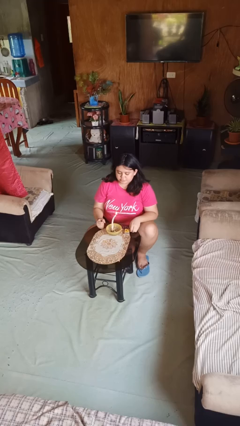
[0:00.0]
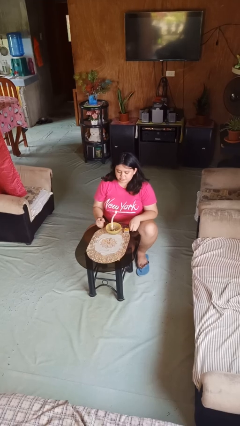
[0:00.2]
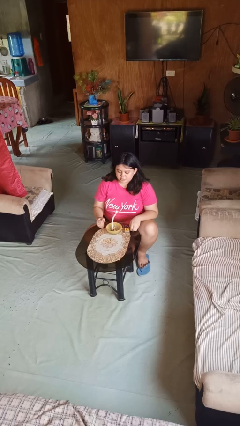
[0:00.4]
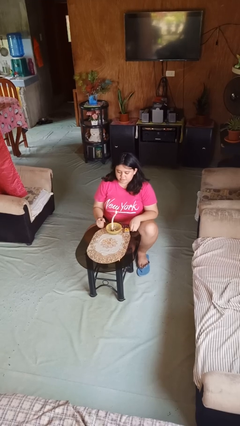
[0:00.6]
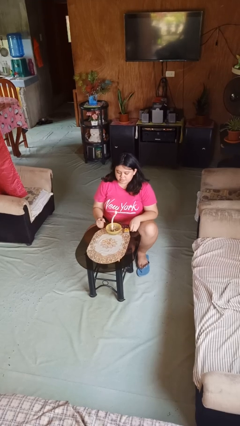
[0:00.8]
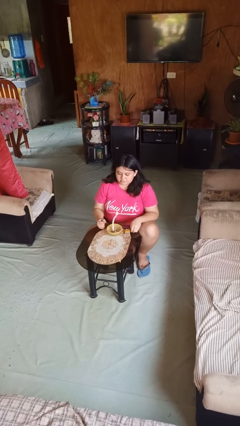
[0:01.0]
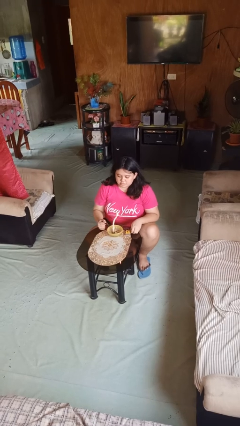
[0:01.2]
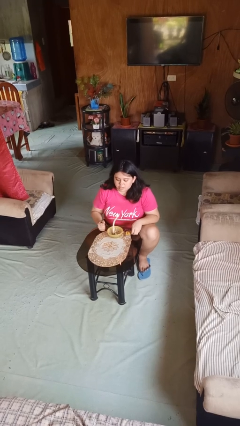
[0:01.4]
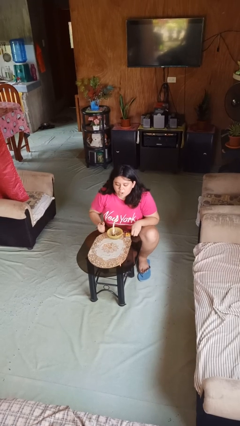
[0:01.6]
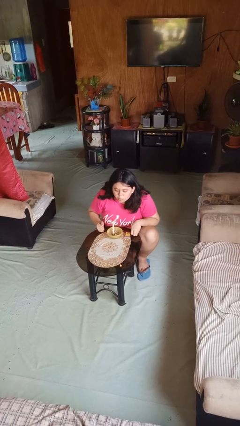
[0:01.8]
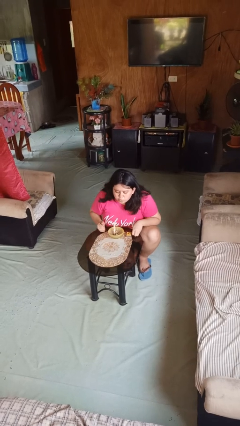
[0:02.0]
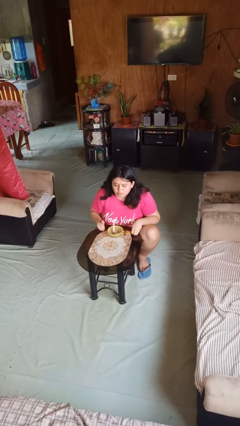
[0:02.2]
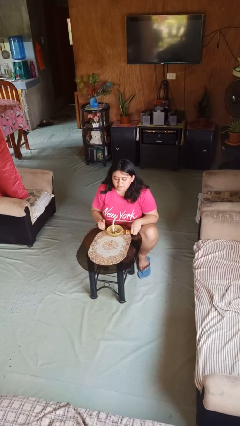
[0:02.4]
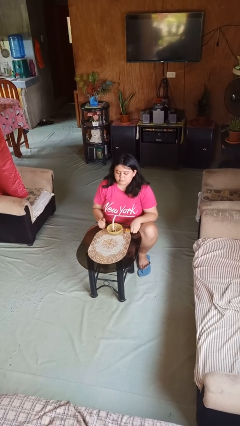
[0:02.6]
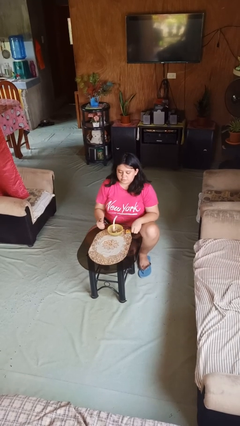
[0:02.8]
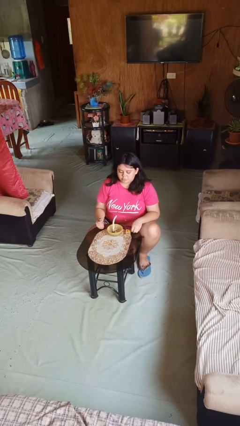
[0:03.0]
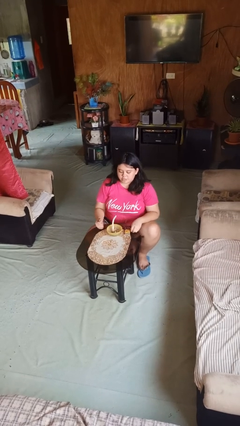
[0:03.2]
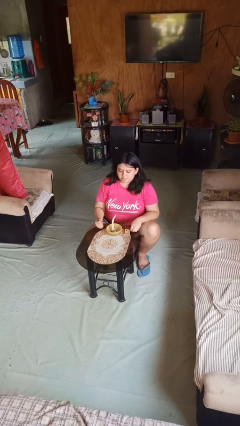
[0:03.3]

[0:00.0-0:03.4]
person extinguishes candle

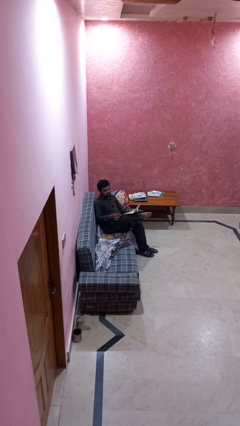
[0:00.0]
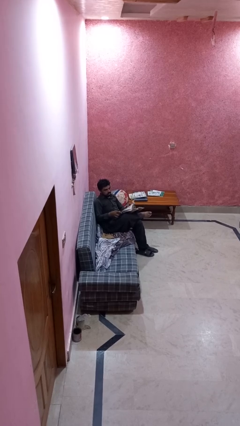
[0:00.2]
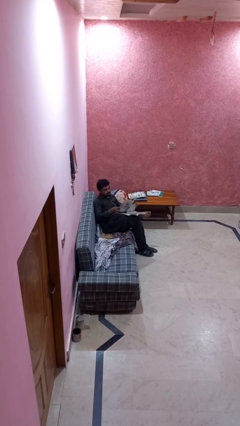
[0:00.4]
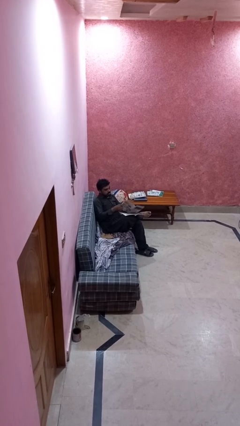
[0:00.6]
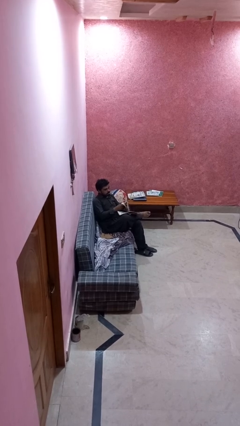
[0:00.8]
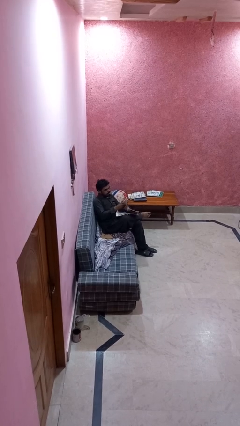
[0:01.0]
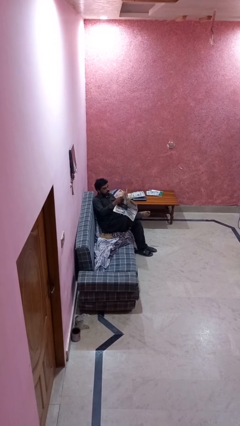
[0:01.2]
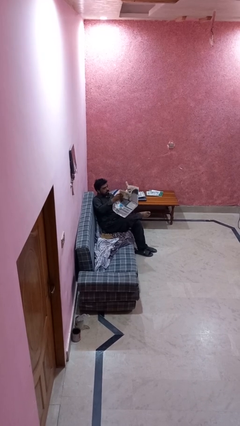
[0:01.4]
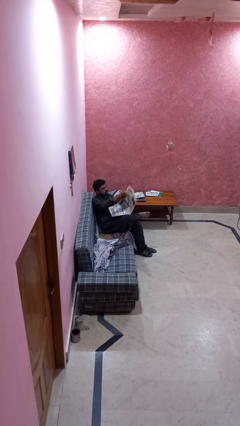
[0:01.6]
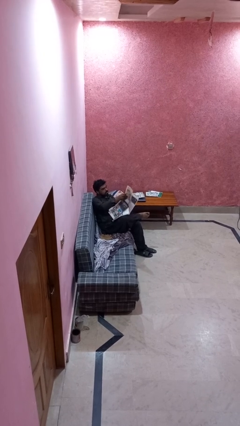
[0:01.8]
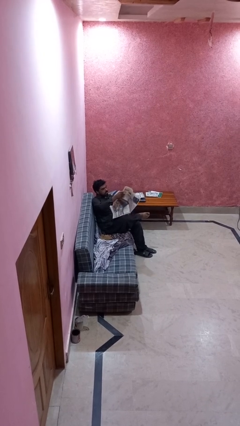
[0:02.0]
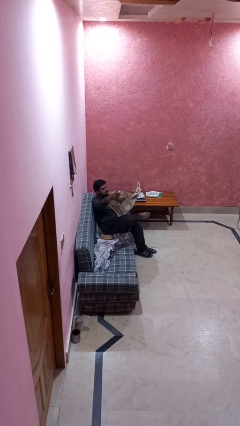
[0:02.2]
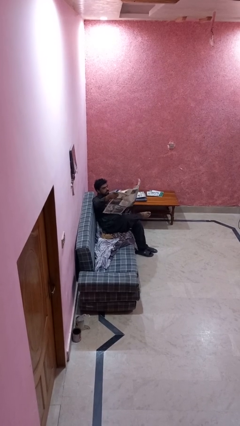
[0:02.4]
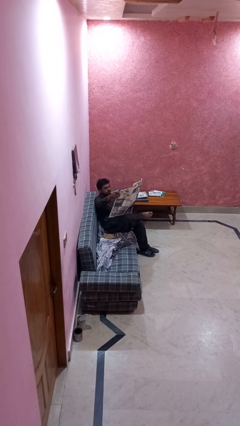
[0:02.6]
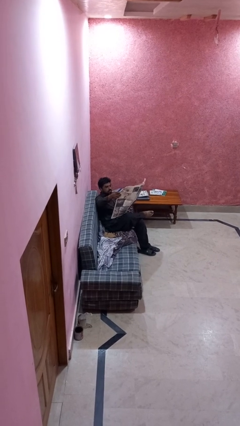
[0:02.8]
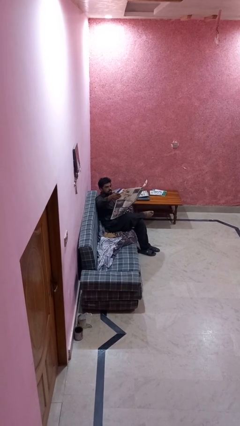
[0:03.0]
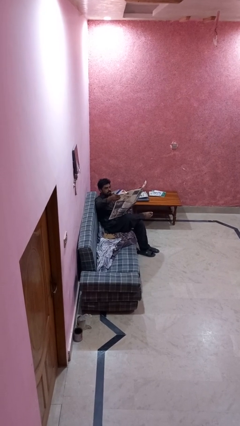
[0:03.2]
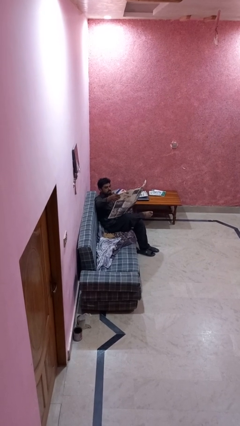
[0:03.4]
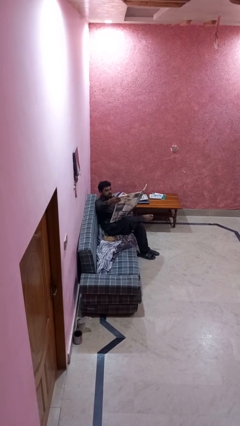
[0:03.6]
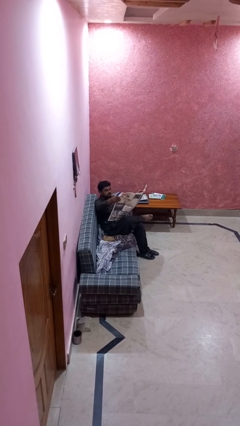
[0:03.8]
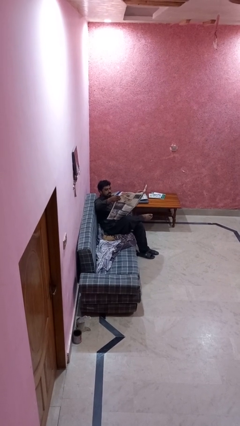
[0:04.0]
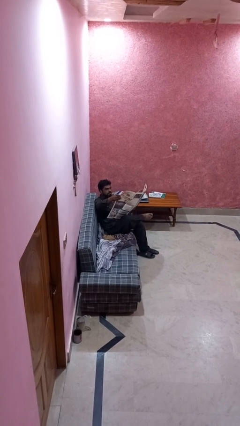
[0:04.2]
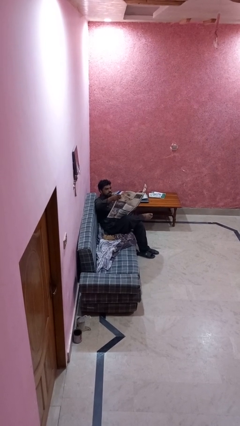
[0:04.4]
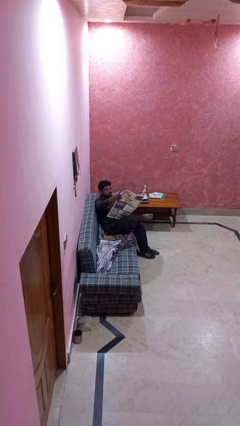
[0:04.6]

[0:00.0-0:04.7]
person reads newspaper

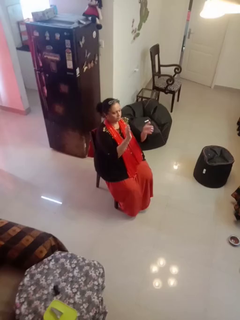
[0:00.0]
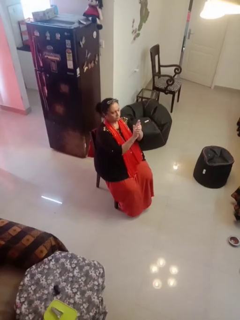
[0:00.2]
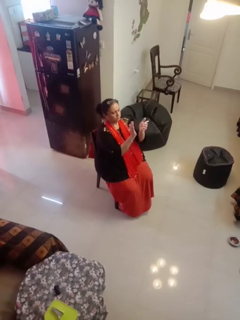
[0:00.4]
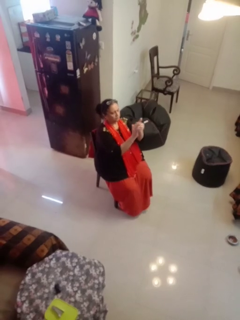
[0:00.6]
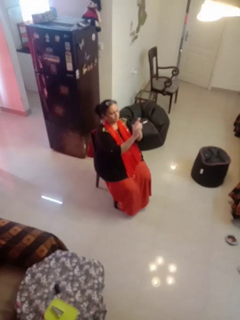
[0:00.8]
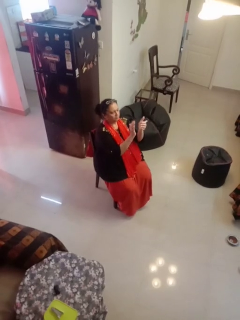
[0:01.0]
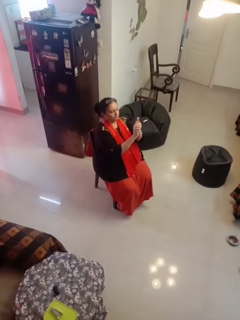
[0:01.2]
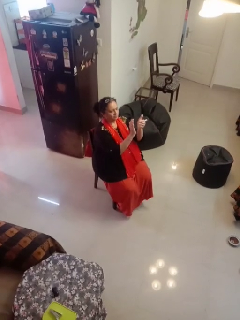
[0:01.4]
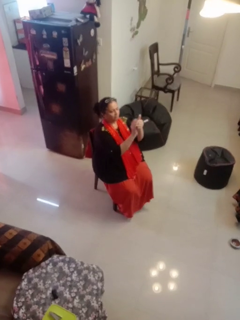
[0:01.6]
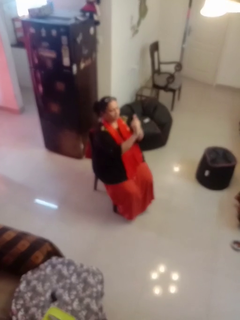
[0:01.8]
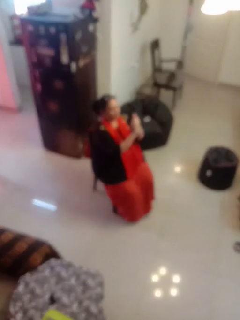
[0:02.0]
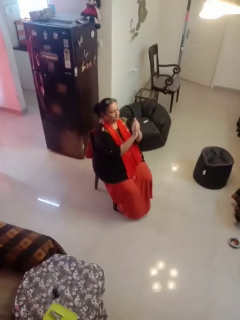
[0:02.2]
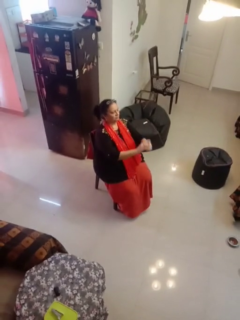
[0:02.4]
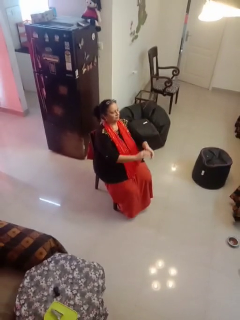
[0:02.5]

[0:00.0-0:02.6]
person claps hands

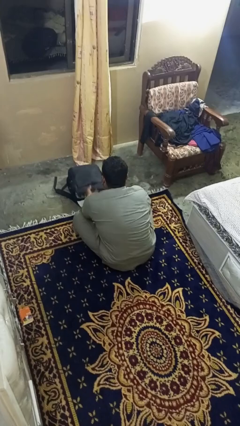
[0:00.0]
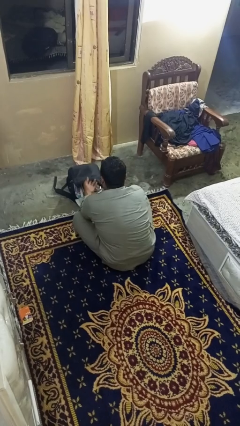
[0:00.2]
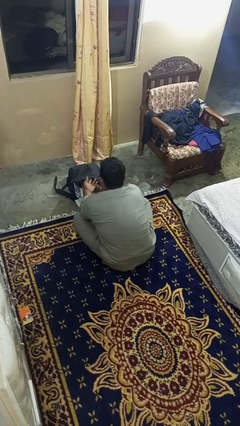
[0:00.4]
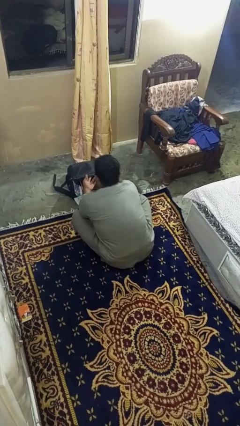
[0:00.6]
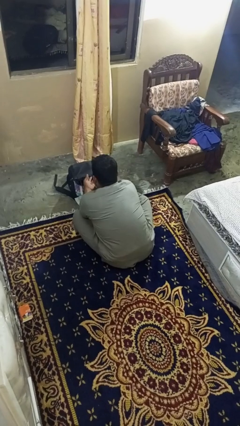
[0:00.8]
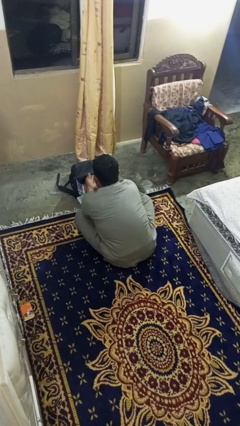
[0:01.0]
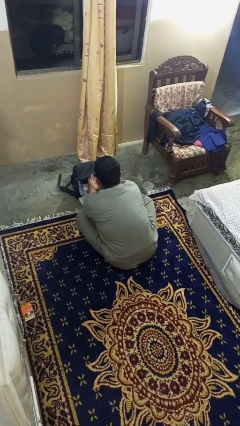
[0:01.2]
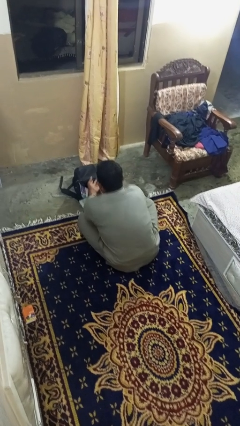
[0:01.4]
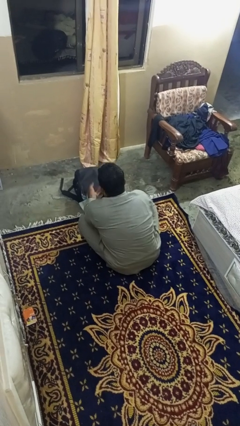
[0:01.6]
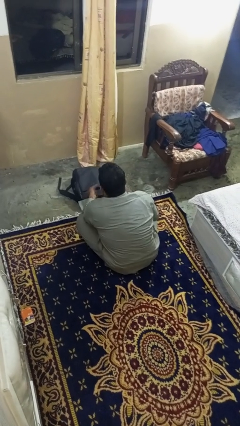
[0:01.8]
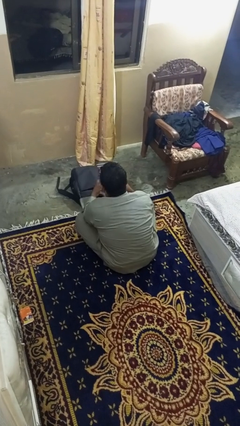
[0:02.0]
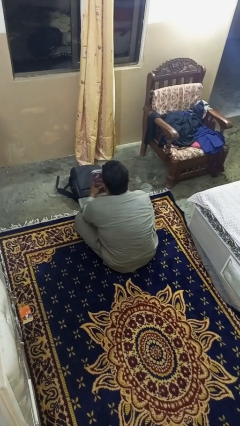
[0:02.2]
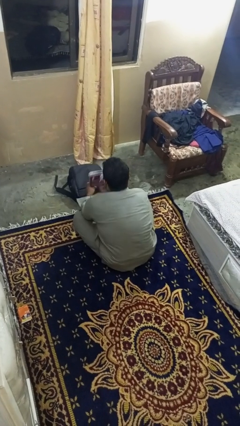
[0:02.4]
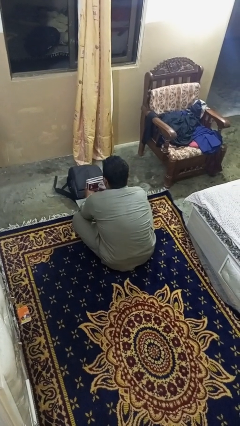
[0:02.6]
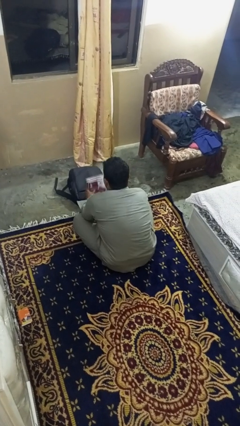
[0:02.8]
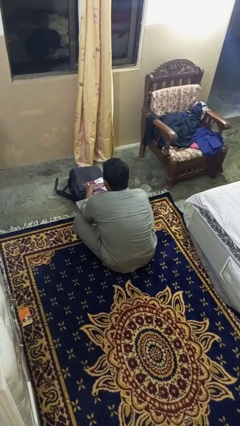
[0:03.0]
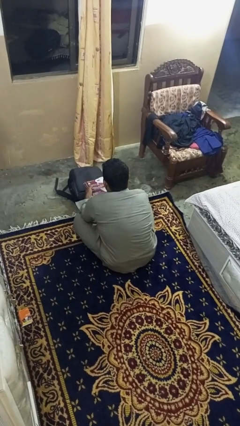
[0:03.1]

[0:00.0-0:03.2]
person takes object from bag

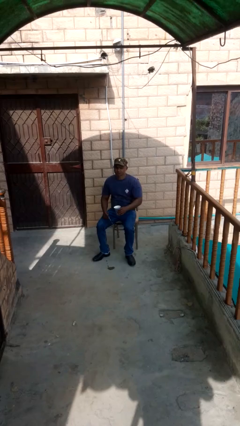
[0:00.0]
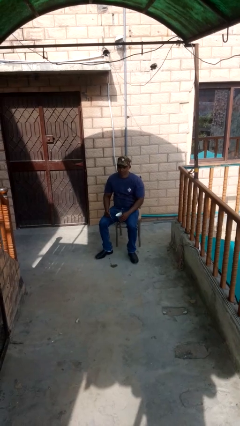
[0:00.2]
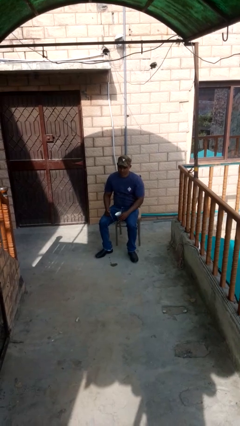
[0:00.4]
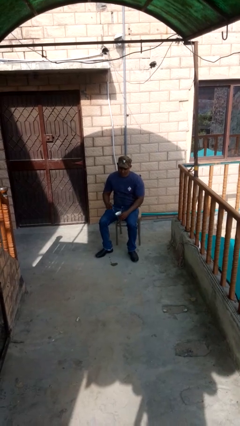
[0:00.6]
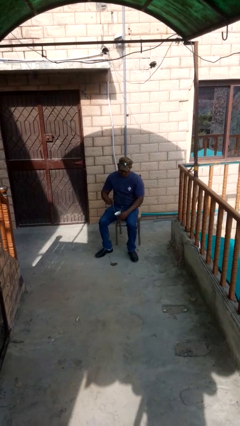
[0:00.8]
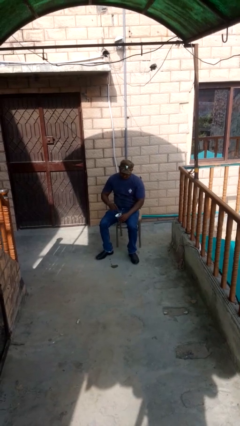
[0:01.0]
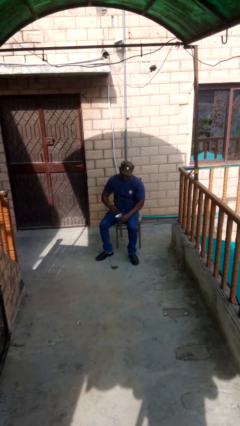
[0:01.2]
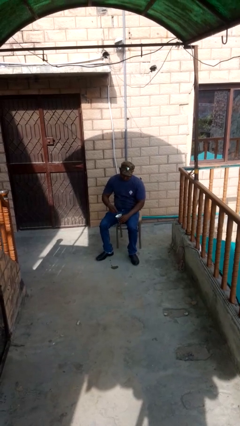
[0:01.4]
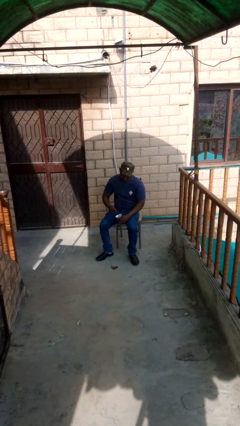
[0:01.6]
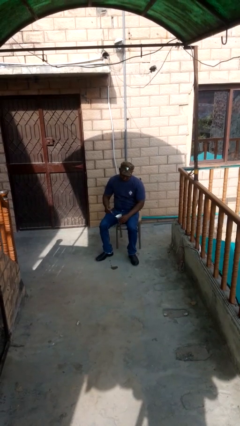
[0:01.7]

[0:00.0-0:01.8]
person stirs mug

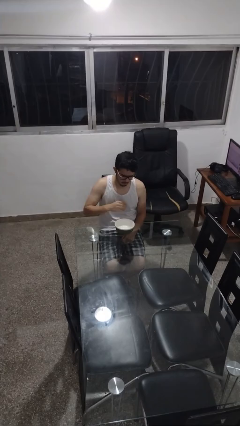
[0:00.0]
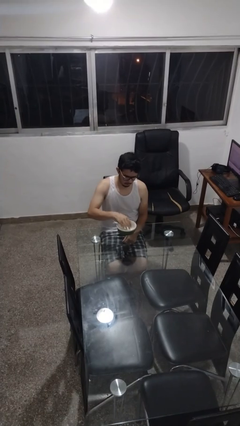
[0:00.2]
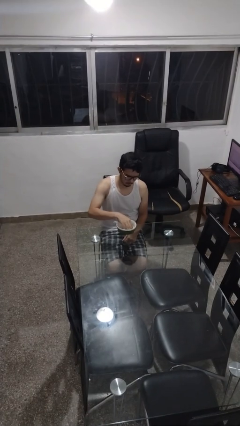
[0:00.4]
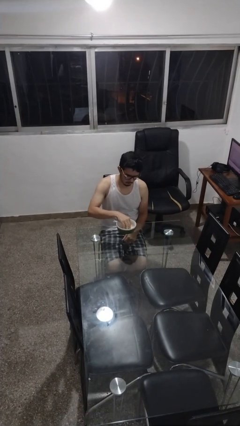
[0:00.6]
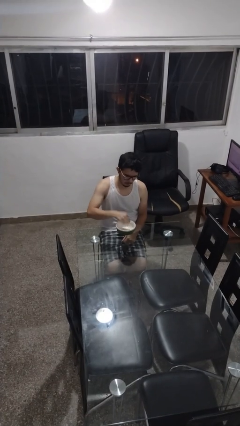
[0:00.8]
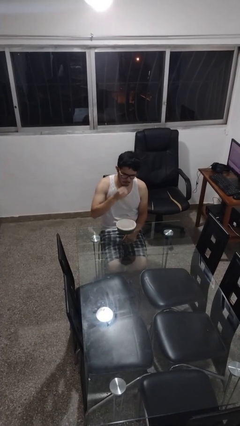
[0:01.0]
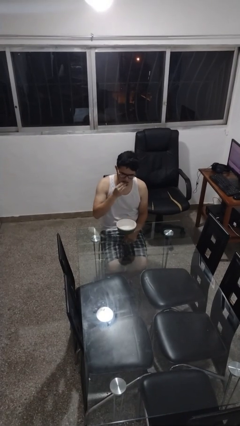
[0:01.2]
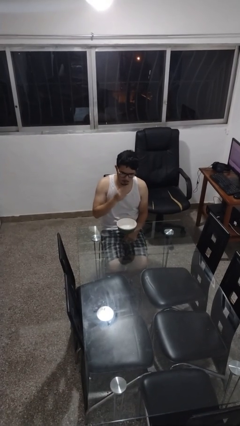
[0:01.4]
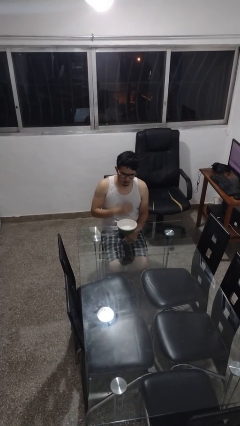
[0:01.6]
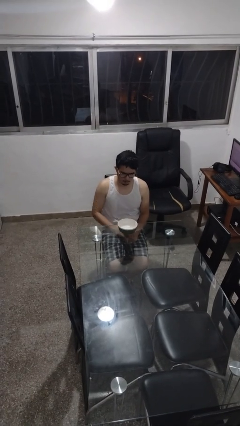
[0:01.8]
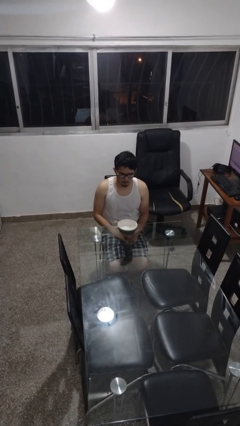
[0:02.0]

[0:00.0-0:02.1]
person eats with hands

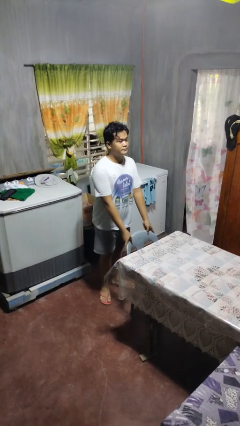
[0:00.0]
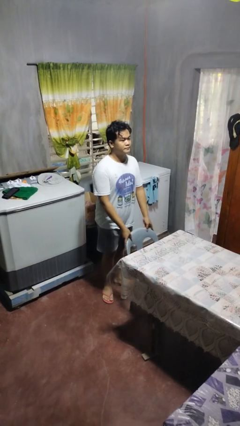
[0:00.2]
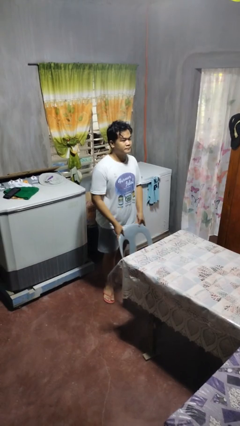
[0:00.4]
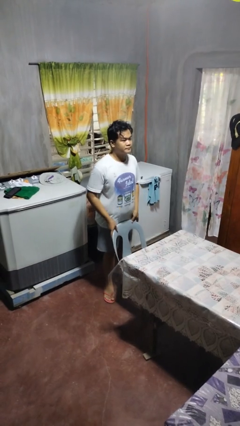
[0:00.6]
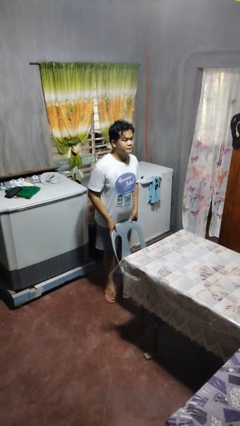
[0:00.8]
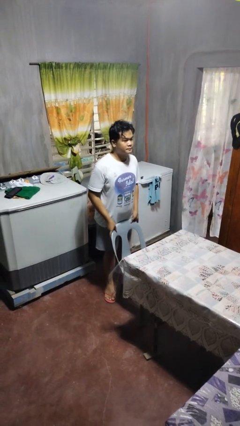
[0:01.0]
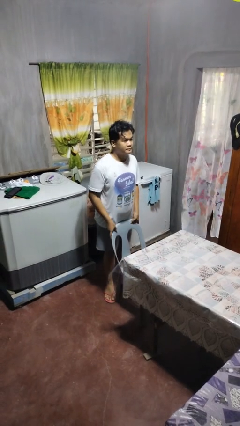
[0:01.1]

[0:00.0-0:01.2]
person pulls out chair
